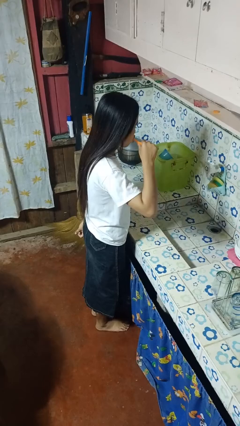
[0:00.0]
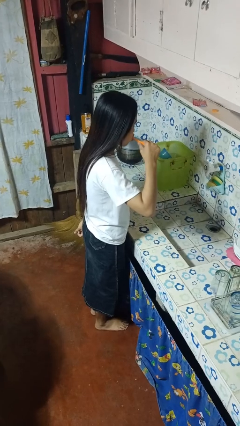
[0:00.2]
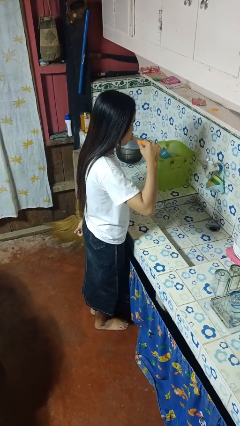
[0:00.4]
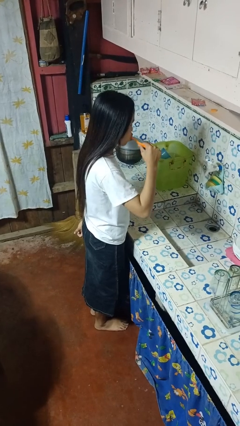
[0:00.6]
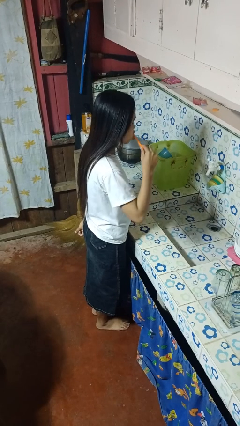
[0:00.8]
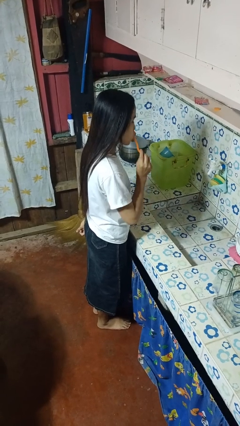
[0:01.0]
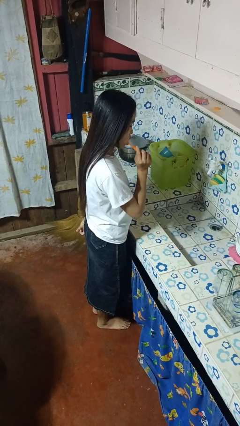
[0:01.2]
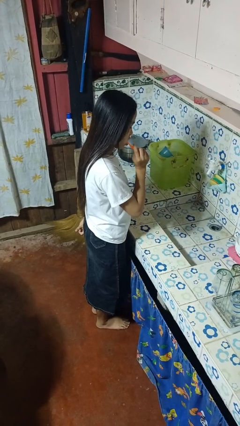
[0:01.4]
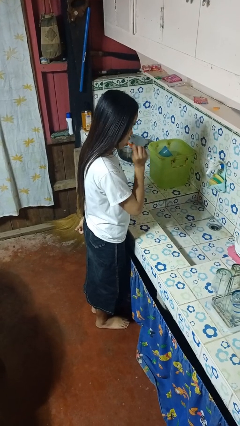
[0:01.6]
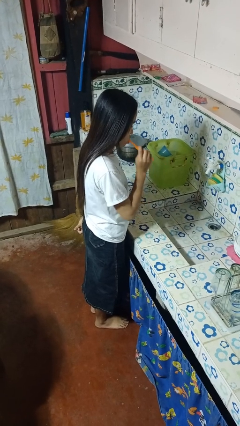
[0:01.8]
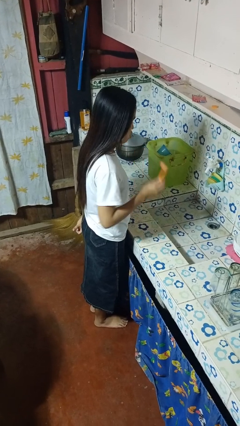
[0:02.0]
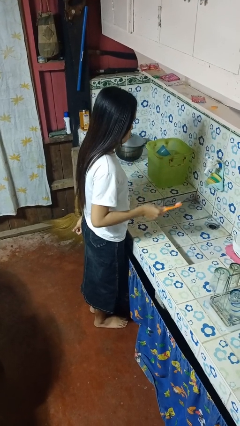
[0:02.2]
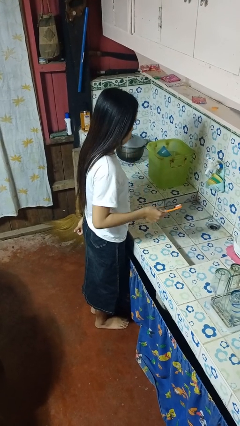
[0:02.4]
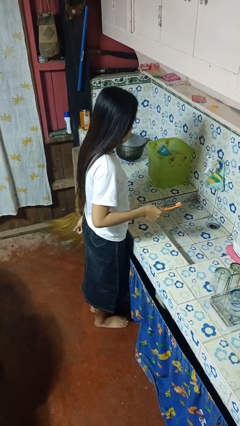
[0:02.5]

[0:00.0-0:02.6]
person brushes teeth

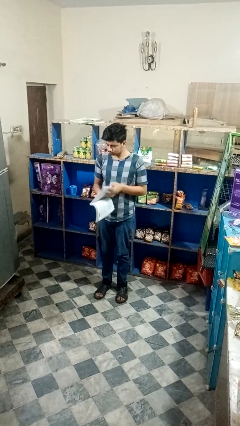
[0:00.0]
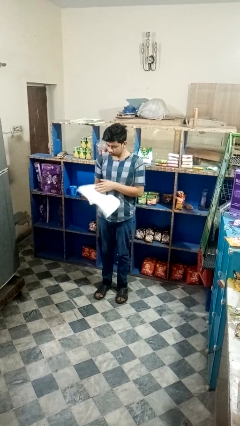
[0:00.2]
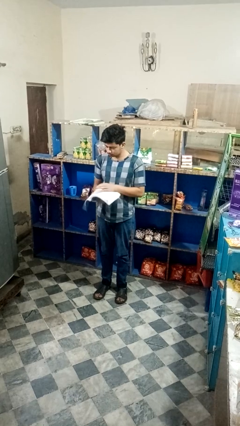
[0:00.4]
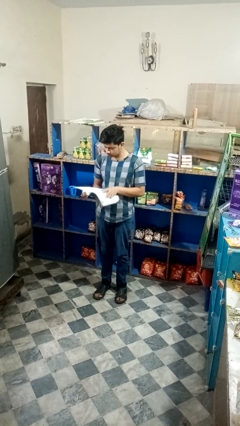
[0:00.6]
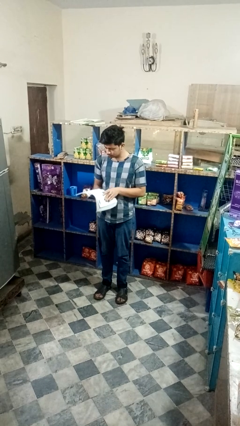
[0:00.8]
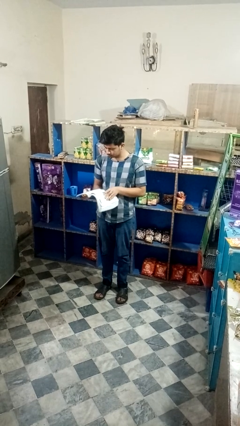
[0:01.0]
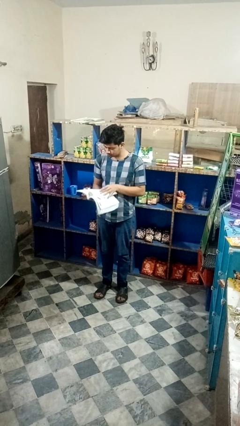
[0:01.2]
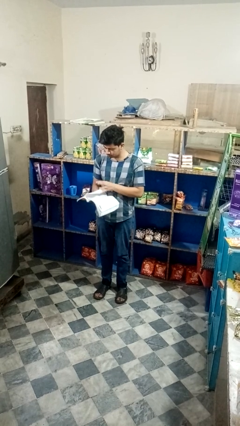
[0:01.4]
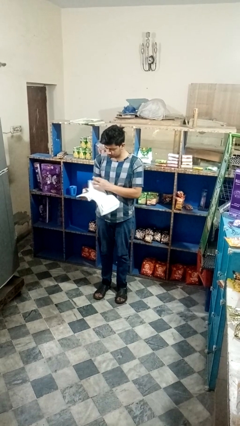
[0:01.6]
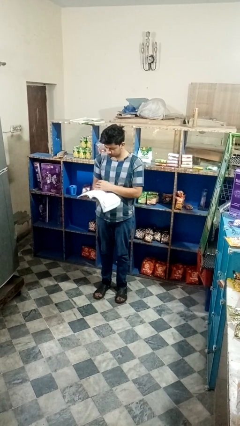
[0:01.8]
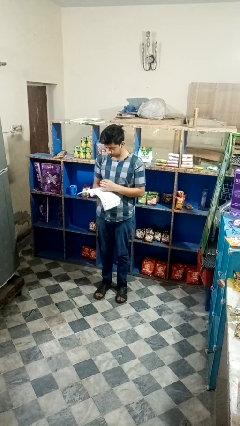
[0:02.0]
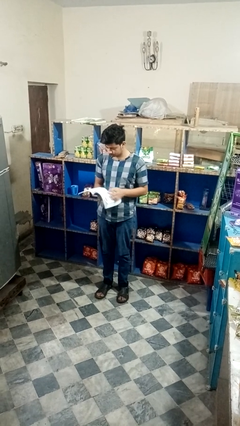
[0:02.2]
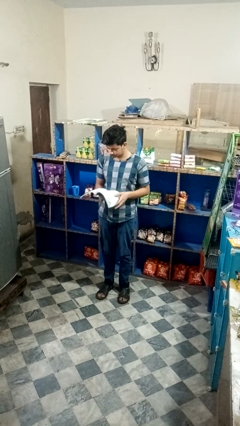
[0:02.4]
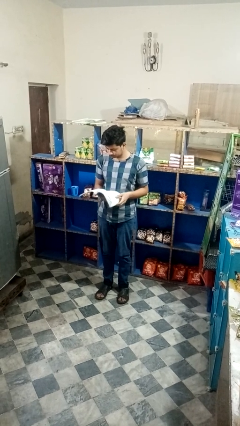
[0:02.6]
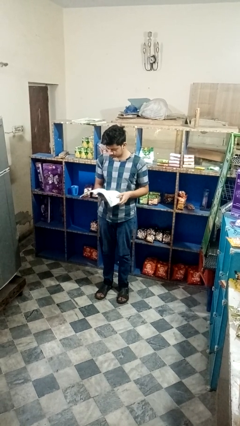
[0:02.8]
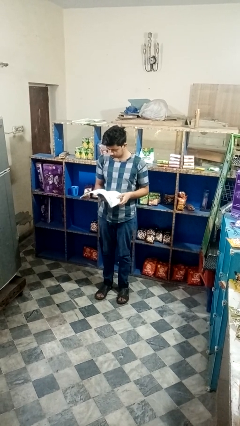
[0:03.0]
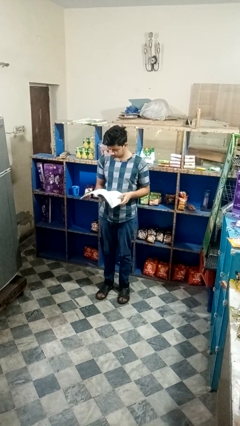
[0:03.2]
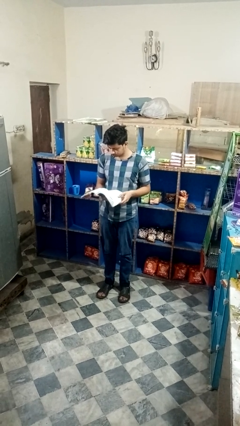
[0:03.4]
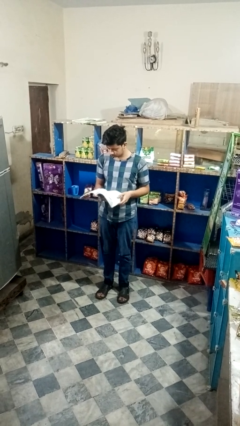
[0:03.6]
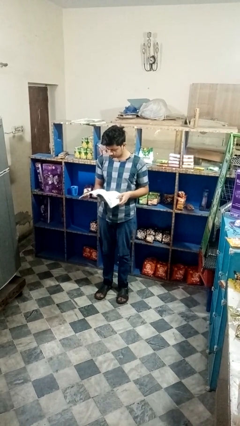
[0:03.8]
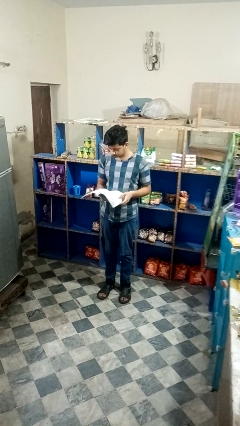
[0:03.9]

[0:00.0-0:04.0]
person reads book

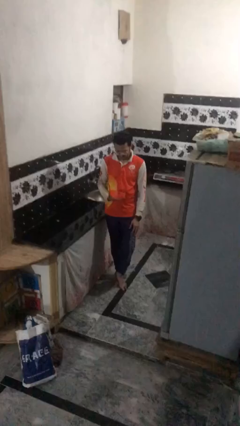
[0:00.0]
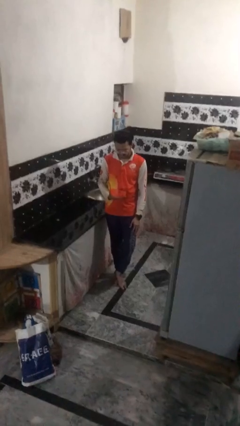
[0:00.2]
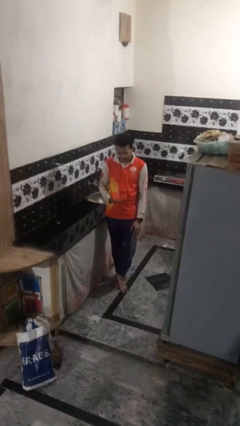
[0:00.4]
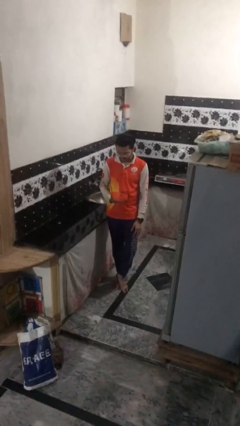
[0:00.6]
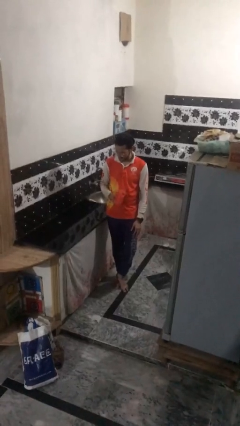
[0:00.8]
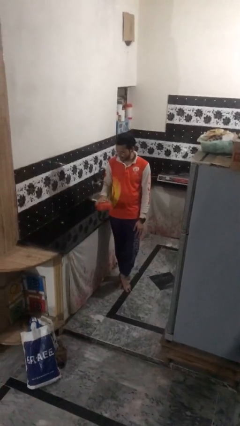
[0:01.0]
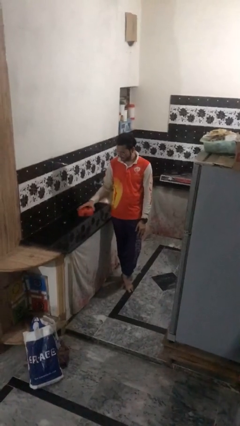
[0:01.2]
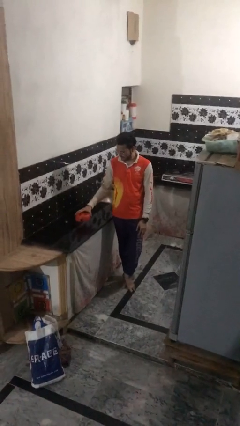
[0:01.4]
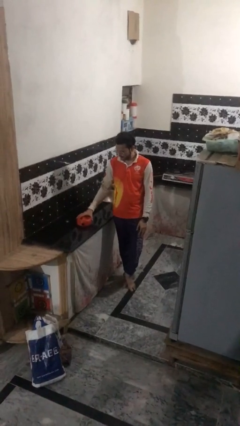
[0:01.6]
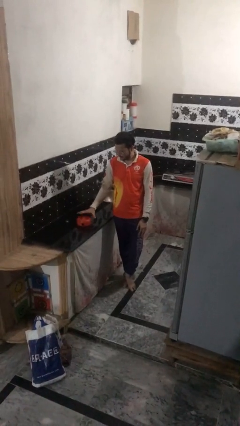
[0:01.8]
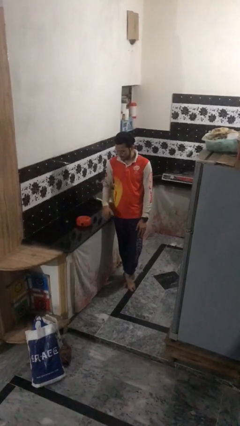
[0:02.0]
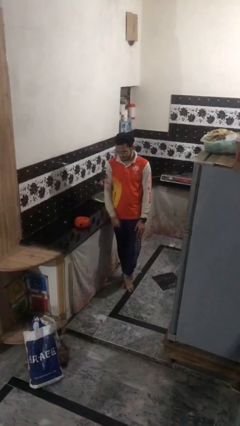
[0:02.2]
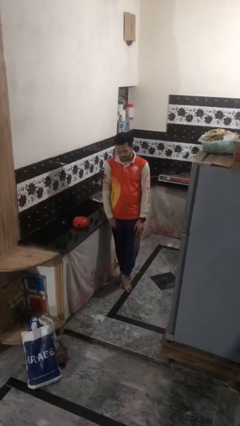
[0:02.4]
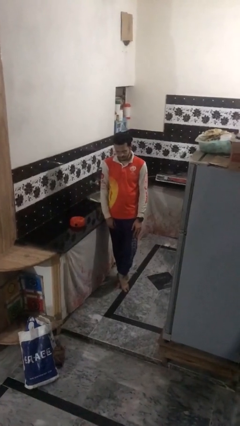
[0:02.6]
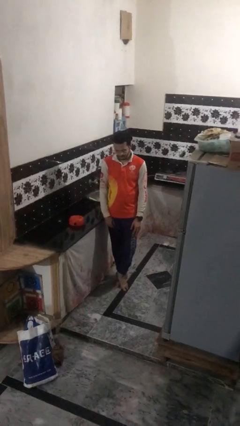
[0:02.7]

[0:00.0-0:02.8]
person puts down object on countertop

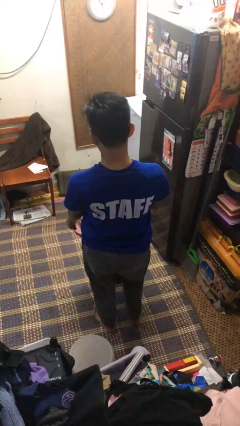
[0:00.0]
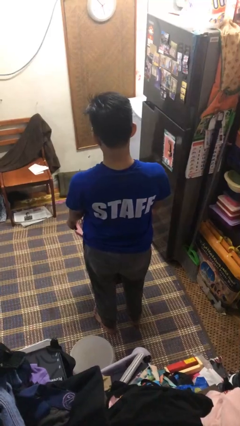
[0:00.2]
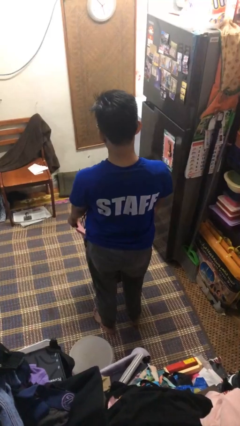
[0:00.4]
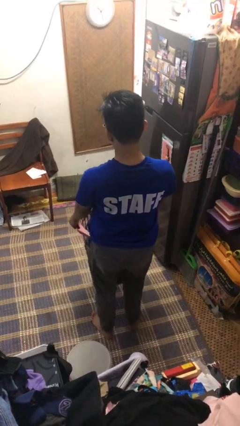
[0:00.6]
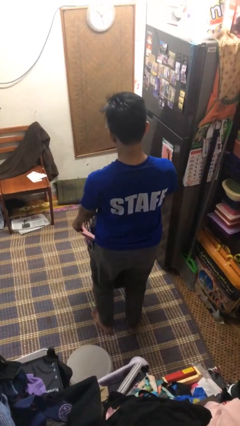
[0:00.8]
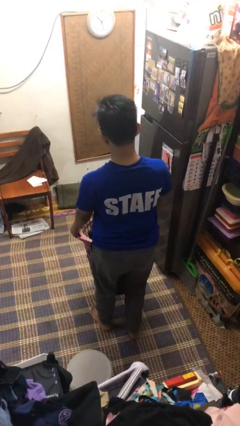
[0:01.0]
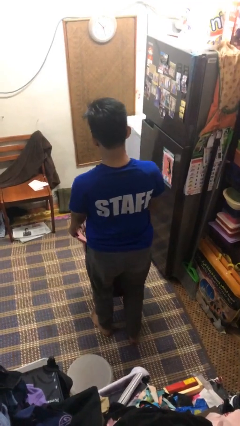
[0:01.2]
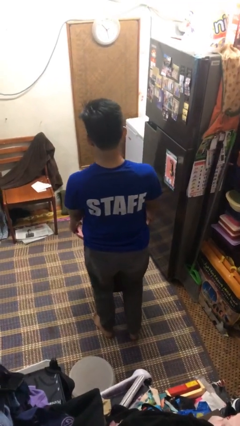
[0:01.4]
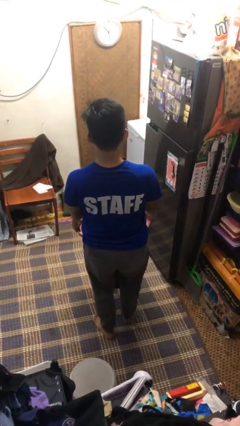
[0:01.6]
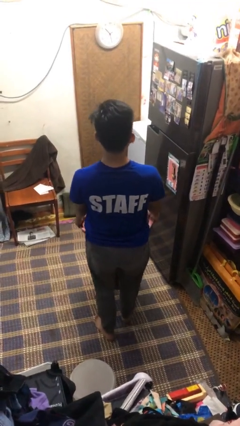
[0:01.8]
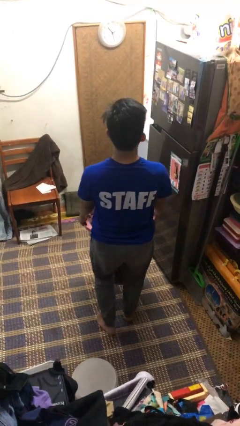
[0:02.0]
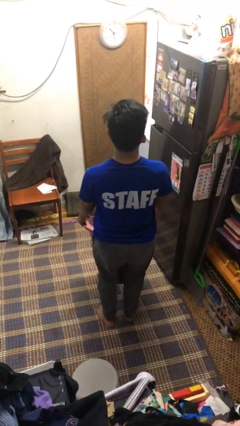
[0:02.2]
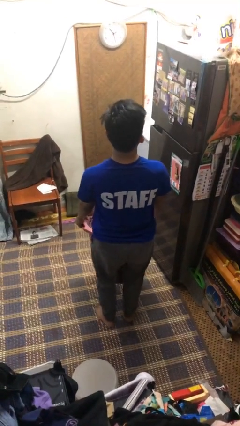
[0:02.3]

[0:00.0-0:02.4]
person carries laundry basket

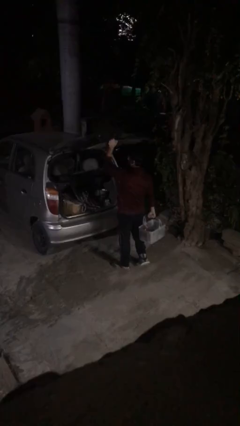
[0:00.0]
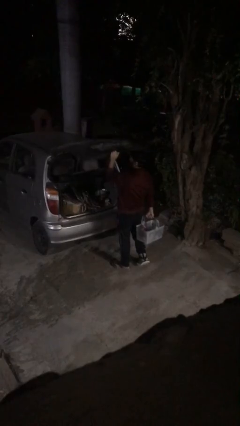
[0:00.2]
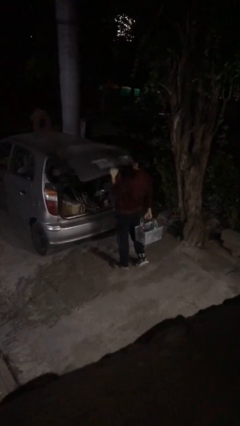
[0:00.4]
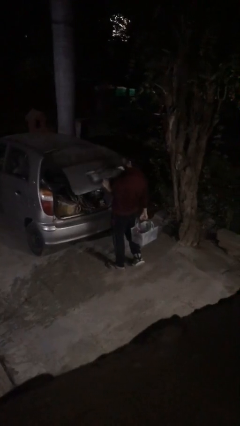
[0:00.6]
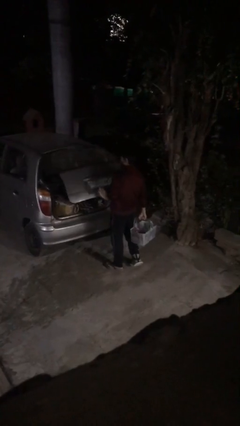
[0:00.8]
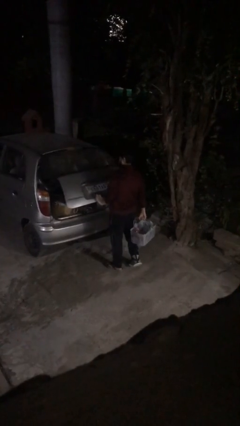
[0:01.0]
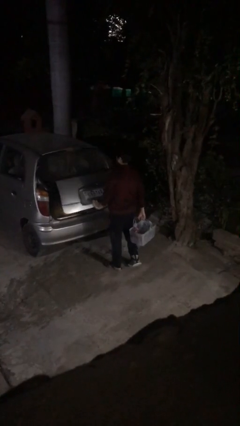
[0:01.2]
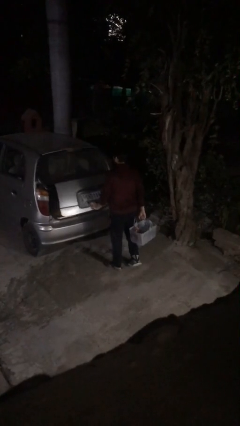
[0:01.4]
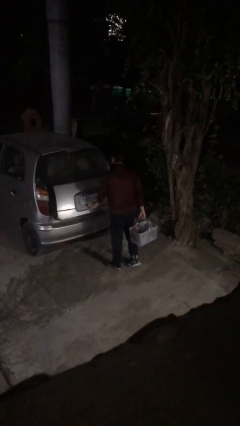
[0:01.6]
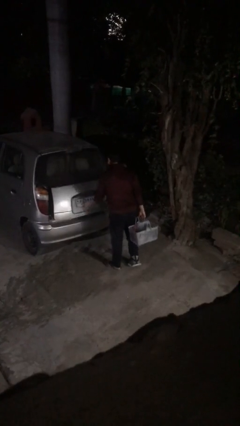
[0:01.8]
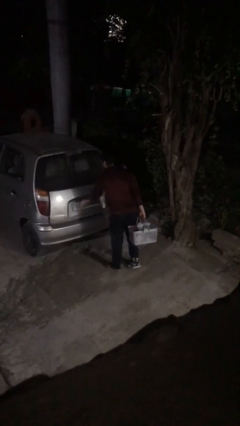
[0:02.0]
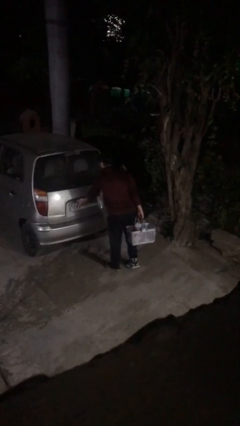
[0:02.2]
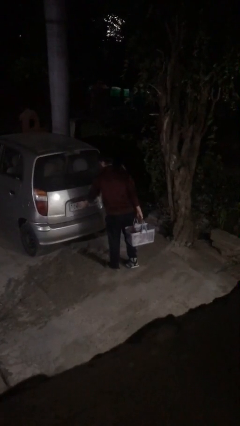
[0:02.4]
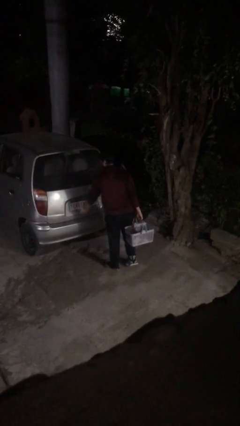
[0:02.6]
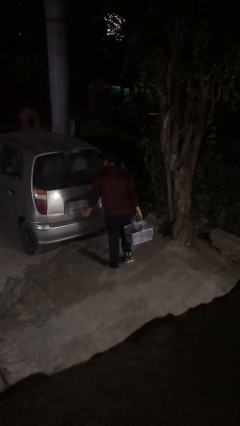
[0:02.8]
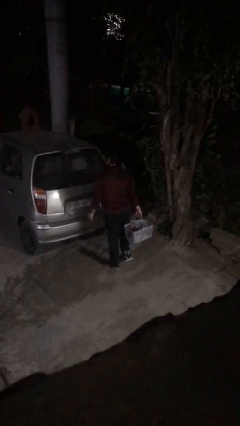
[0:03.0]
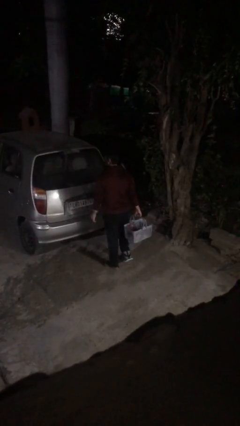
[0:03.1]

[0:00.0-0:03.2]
person closes car trunk

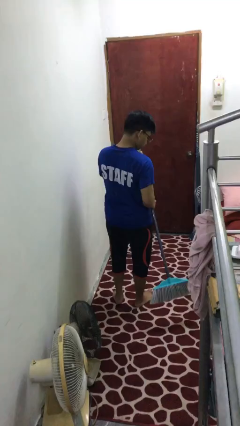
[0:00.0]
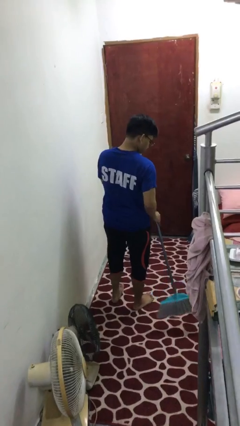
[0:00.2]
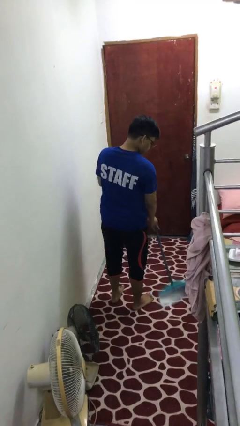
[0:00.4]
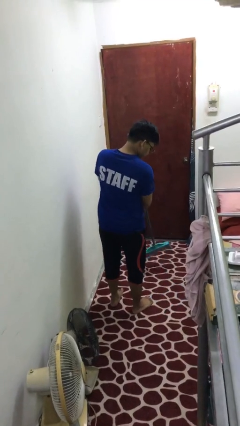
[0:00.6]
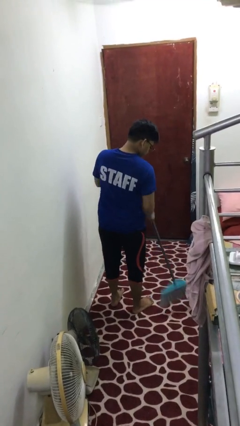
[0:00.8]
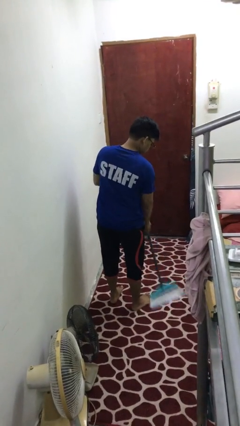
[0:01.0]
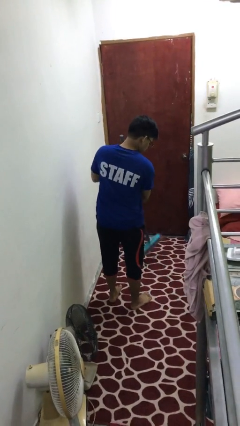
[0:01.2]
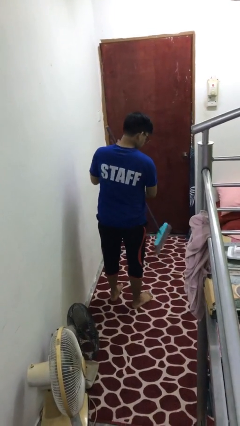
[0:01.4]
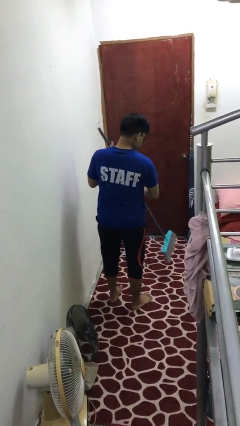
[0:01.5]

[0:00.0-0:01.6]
person sweeps floor

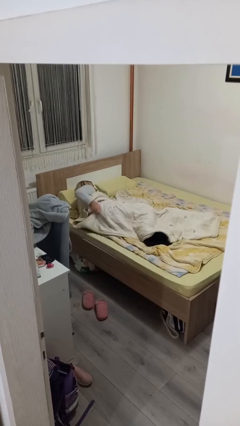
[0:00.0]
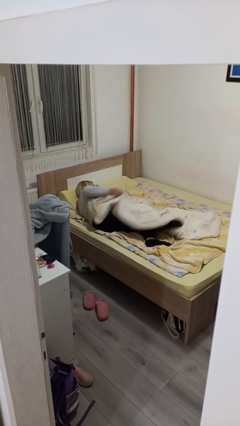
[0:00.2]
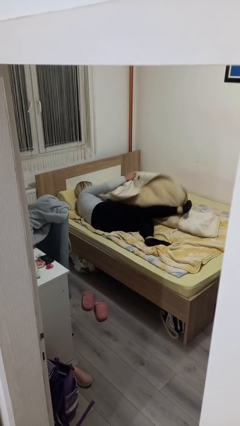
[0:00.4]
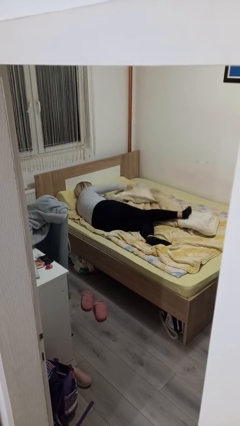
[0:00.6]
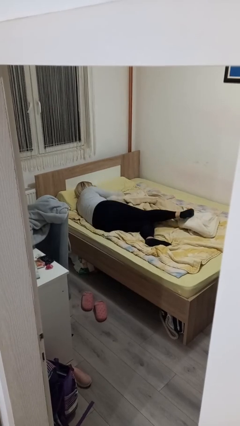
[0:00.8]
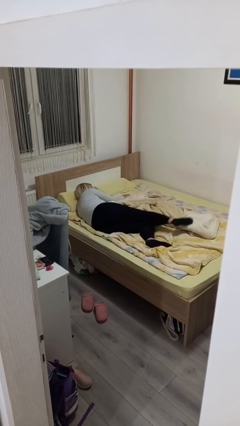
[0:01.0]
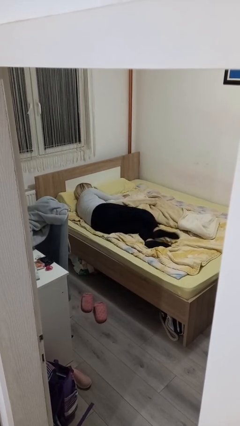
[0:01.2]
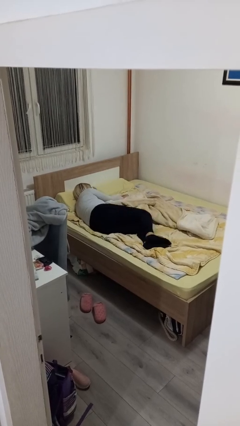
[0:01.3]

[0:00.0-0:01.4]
person uncovers with bedsheets
